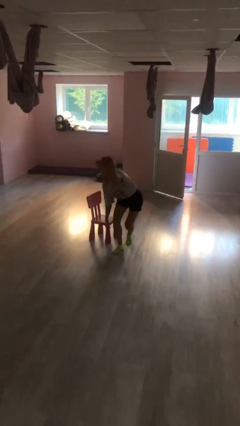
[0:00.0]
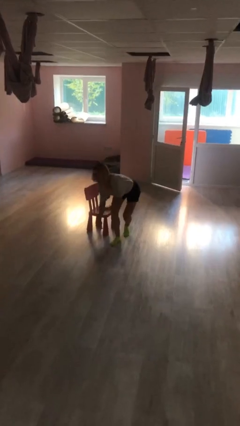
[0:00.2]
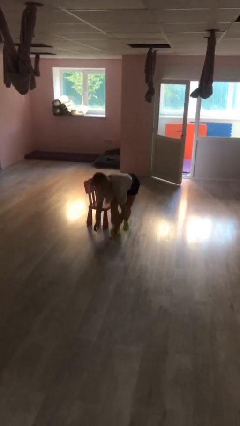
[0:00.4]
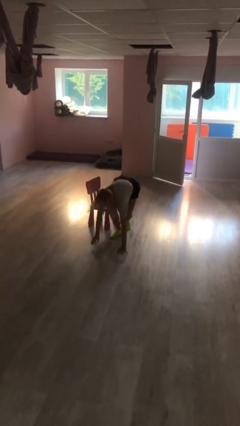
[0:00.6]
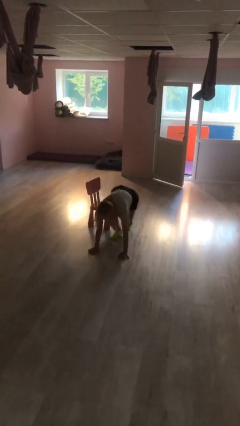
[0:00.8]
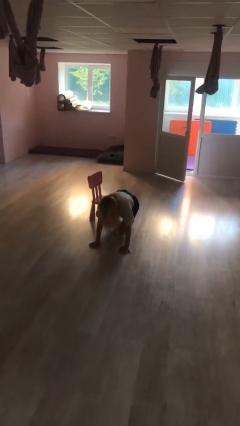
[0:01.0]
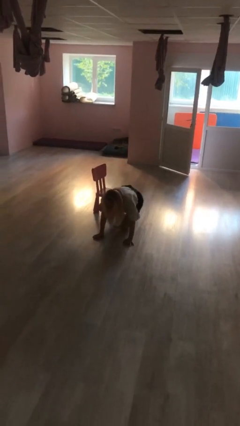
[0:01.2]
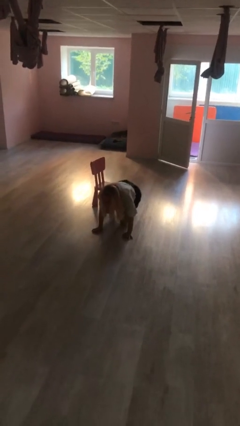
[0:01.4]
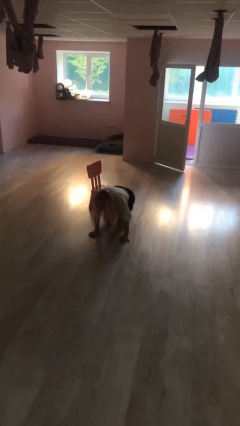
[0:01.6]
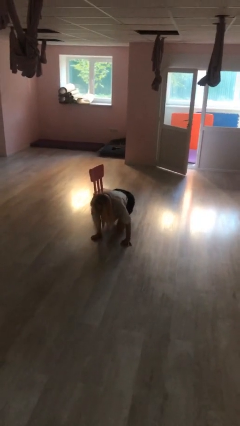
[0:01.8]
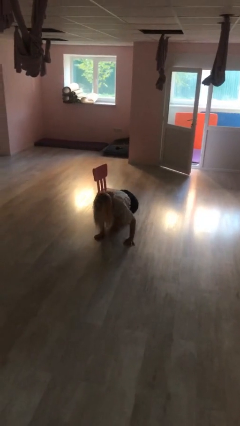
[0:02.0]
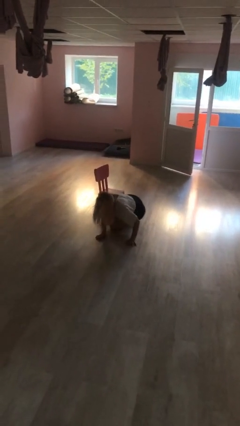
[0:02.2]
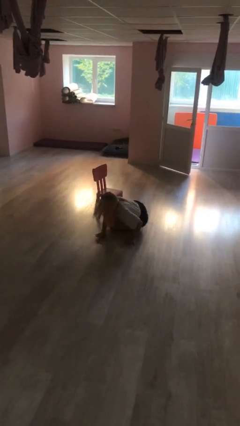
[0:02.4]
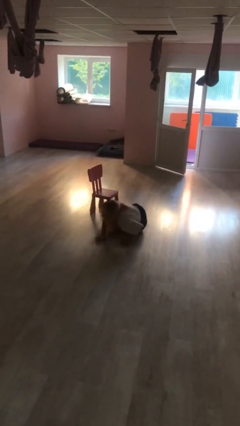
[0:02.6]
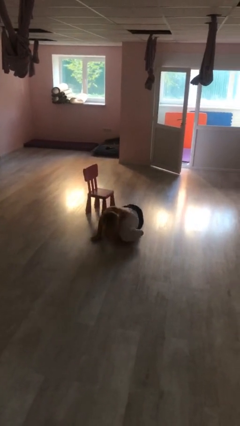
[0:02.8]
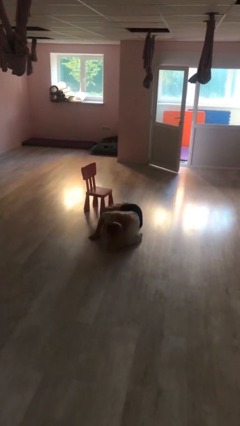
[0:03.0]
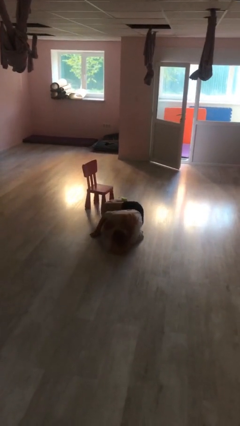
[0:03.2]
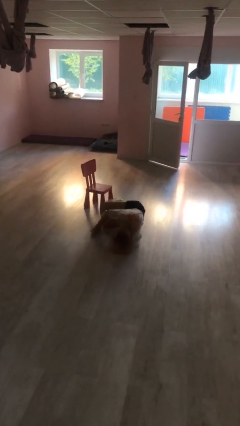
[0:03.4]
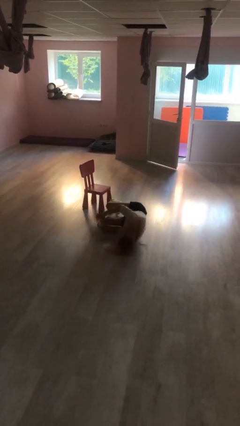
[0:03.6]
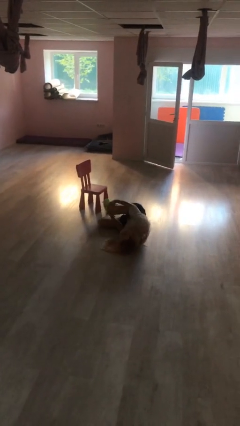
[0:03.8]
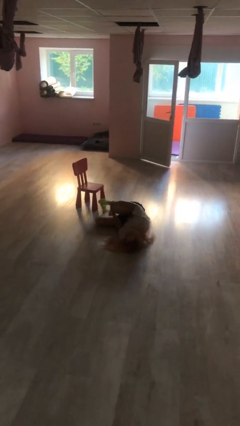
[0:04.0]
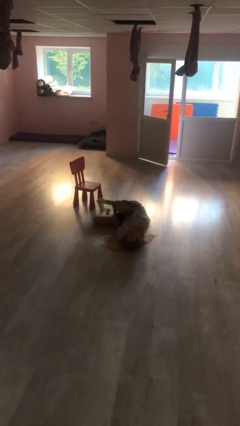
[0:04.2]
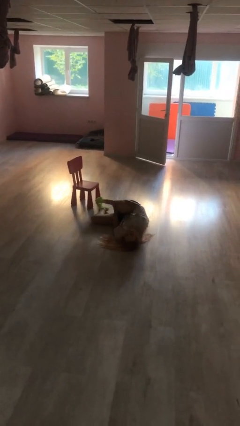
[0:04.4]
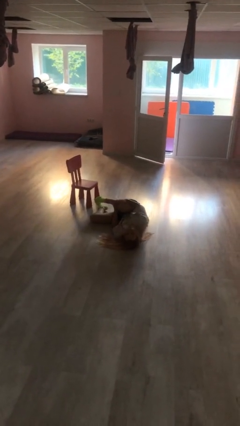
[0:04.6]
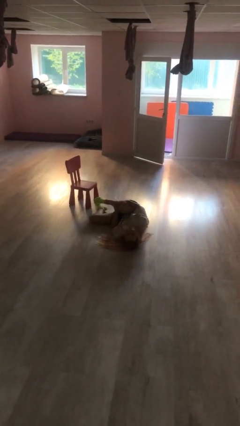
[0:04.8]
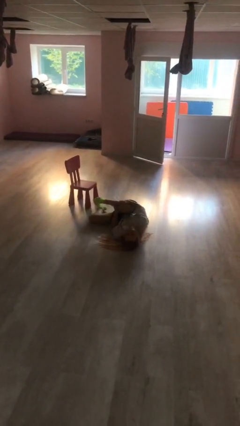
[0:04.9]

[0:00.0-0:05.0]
person lies down on floor

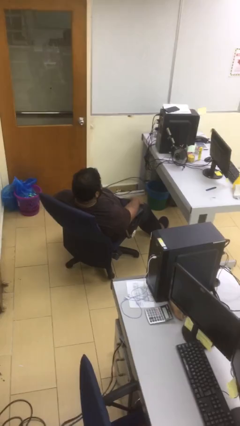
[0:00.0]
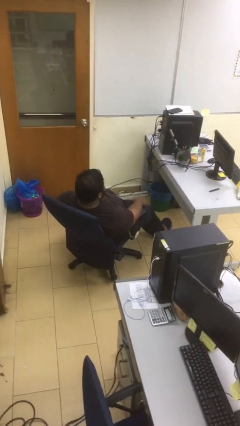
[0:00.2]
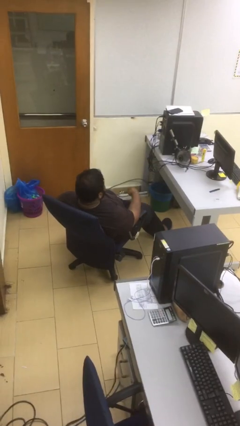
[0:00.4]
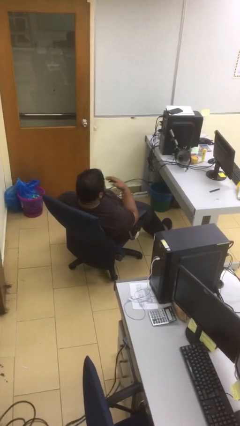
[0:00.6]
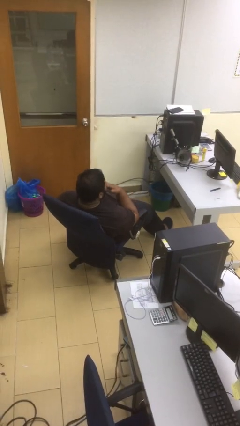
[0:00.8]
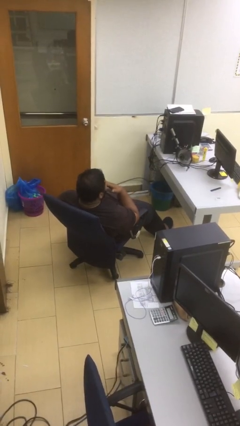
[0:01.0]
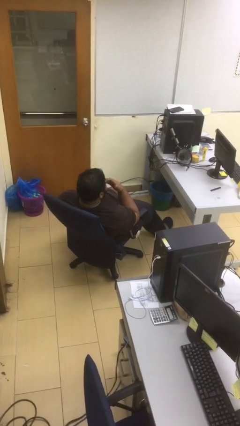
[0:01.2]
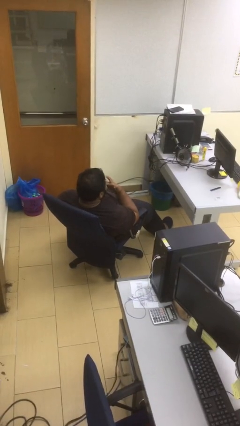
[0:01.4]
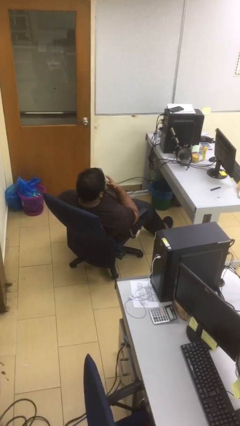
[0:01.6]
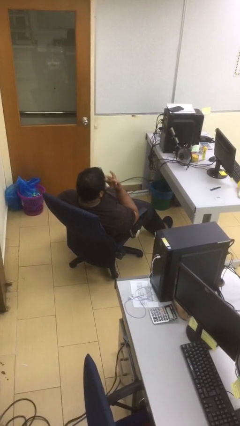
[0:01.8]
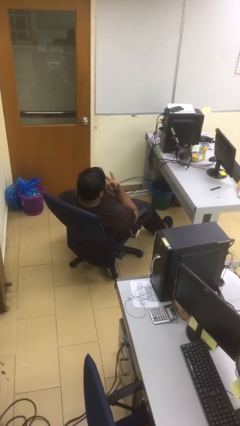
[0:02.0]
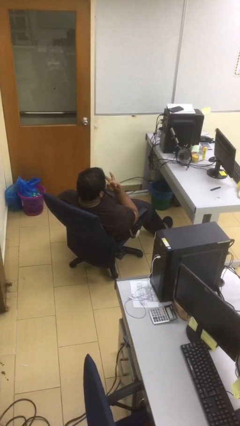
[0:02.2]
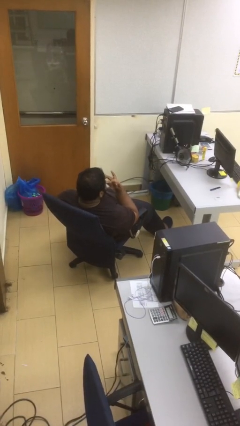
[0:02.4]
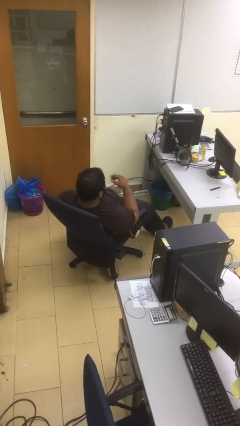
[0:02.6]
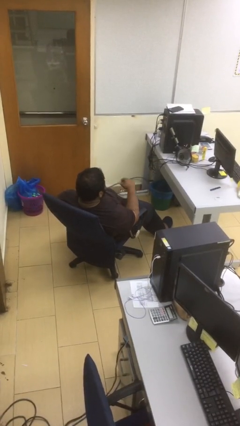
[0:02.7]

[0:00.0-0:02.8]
person licks fingers

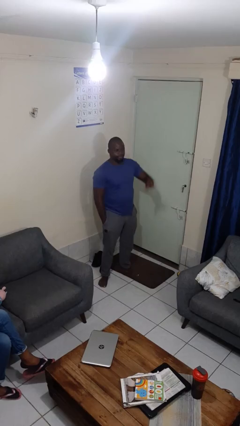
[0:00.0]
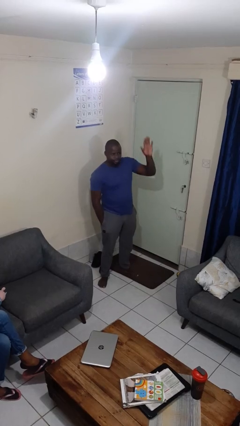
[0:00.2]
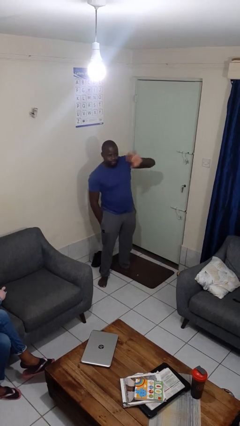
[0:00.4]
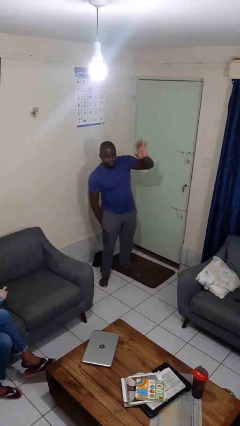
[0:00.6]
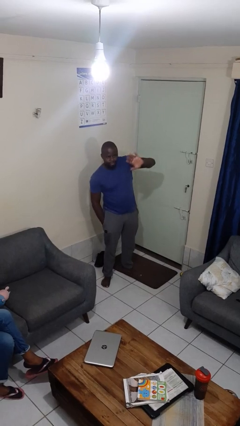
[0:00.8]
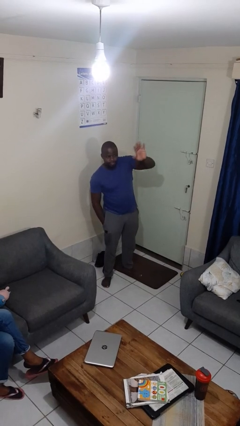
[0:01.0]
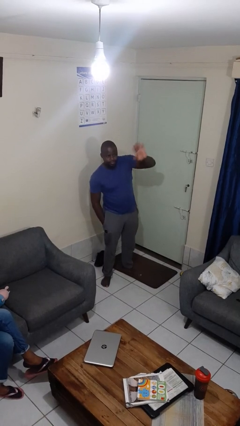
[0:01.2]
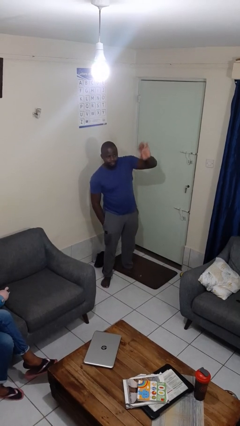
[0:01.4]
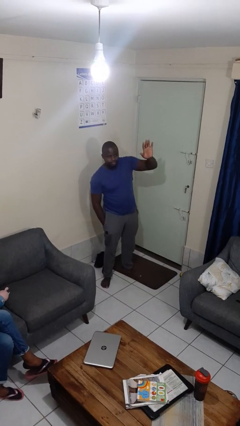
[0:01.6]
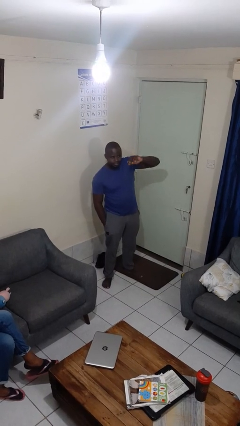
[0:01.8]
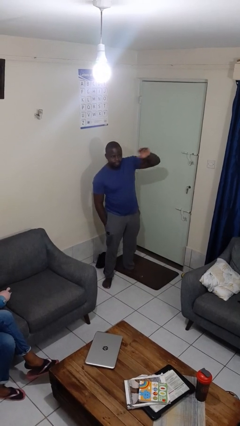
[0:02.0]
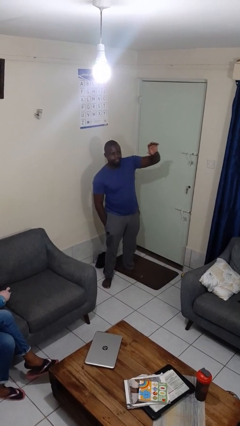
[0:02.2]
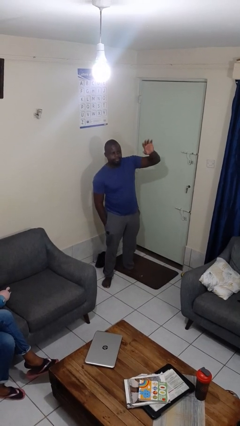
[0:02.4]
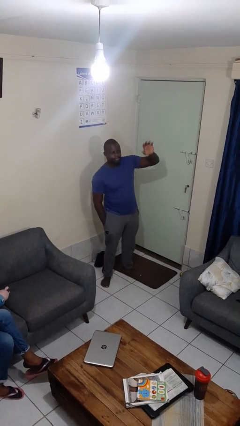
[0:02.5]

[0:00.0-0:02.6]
person waves at person

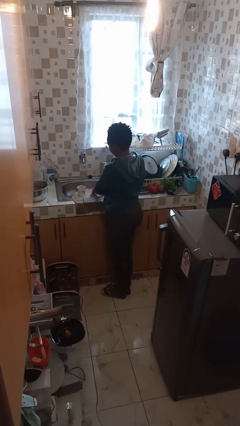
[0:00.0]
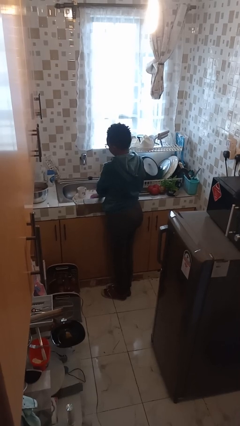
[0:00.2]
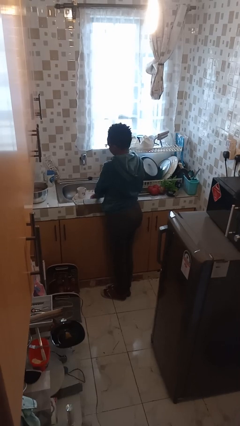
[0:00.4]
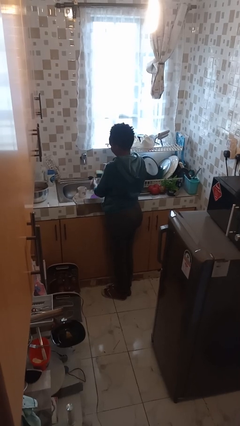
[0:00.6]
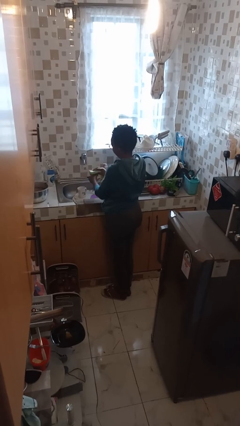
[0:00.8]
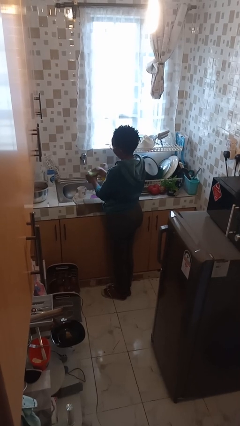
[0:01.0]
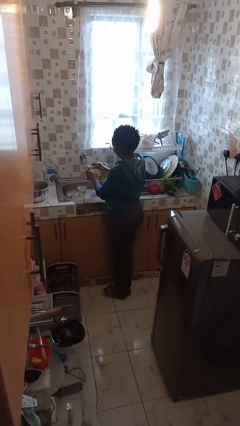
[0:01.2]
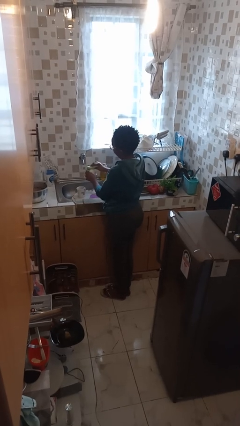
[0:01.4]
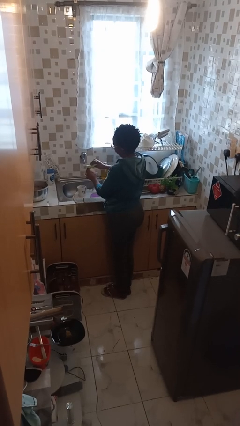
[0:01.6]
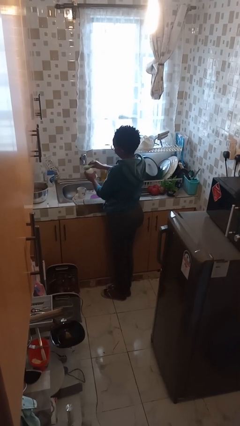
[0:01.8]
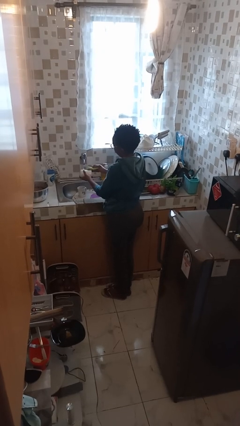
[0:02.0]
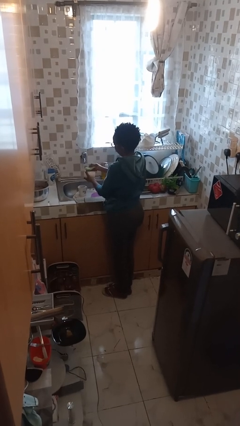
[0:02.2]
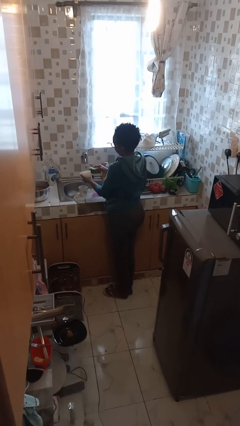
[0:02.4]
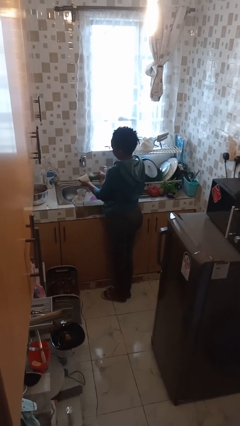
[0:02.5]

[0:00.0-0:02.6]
person washes dish

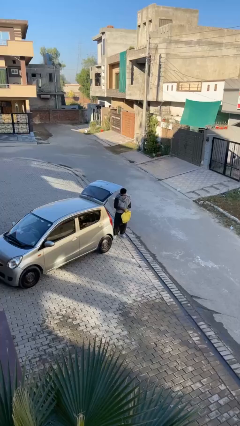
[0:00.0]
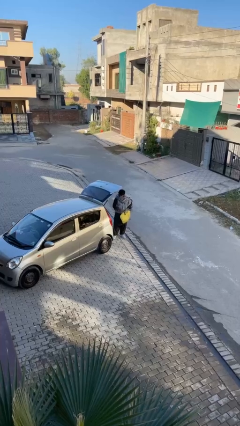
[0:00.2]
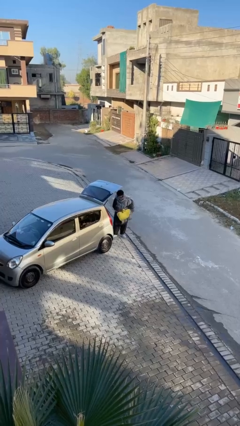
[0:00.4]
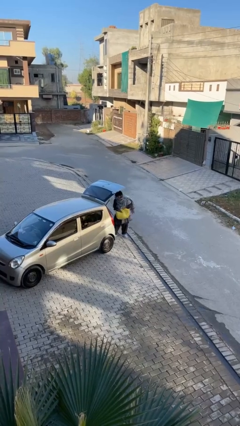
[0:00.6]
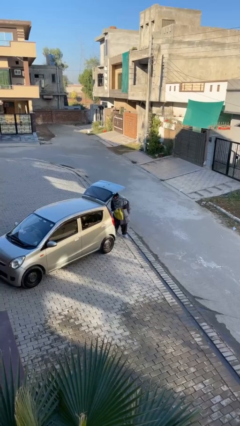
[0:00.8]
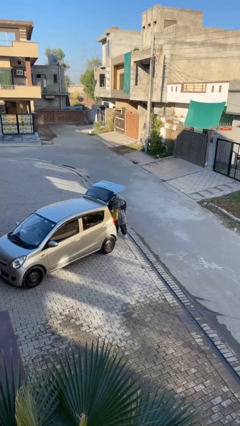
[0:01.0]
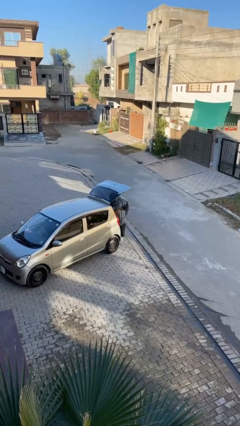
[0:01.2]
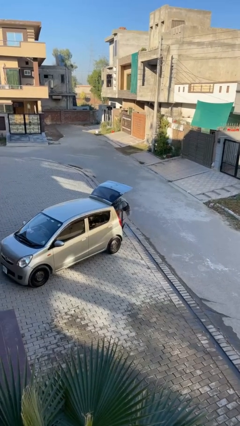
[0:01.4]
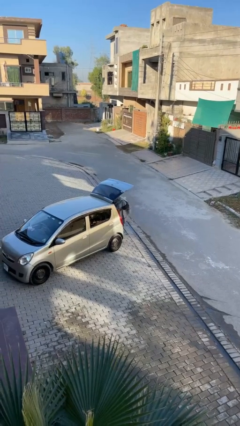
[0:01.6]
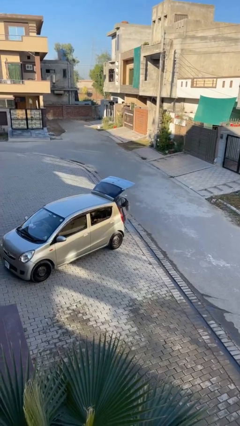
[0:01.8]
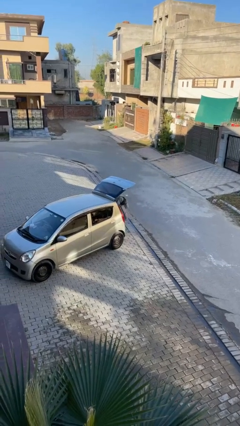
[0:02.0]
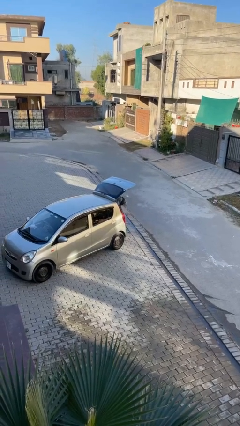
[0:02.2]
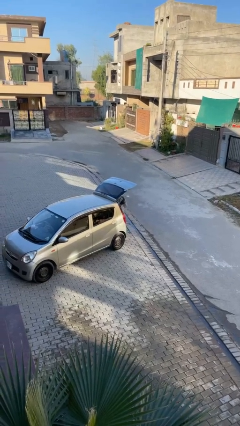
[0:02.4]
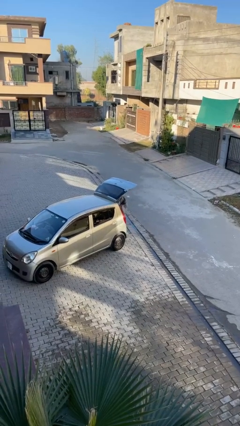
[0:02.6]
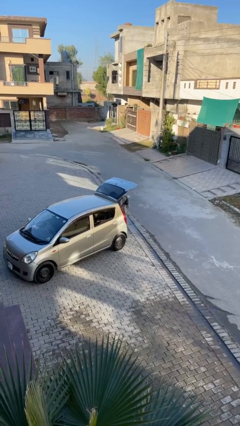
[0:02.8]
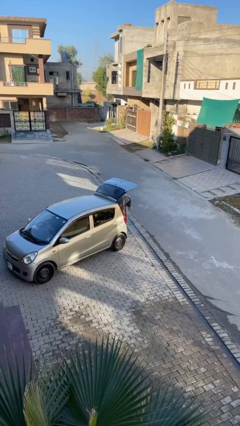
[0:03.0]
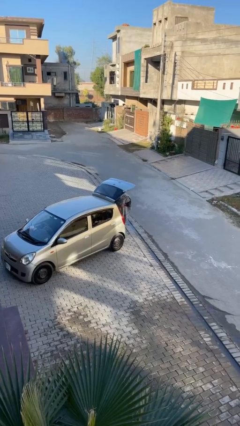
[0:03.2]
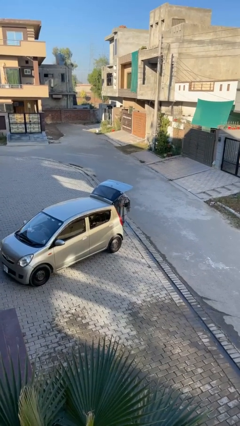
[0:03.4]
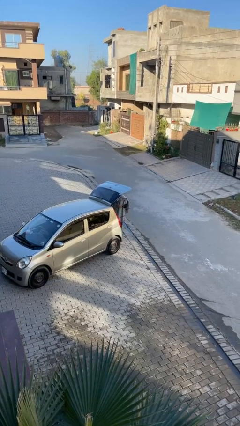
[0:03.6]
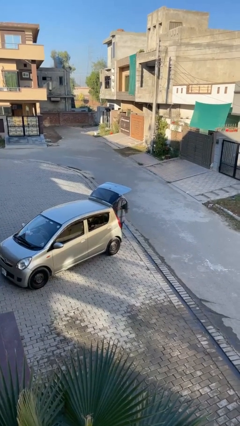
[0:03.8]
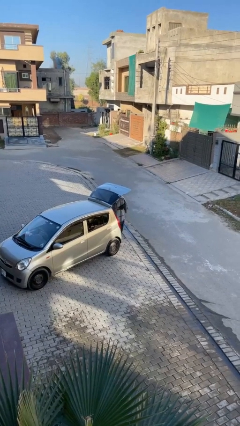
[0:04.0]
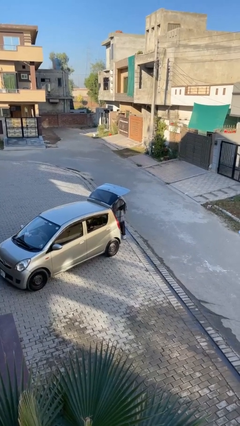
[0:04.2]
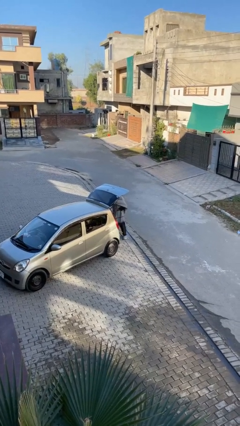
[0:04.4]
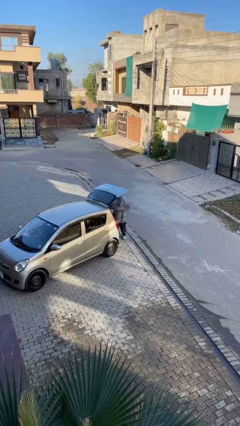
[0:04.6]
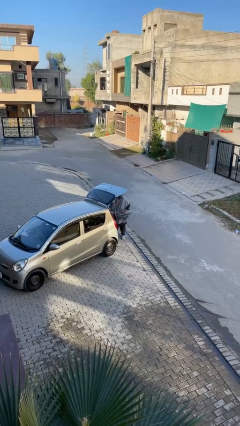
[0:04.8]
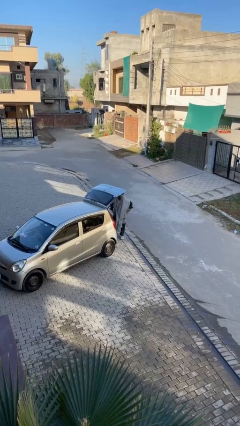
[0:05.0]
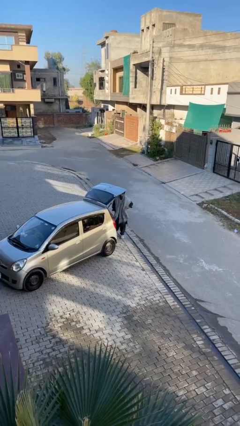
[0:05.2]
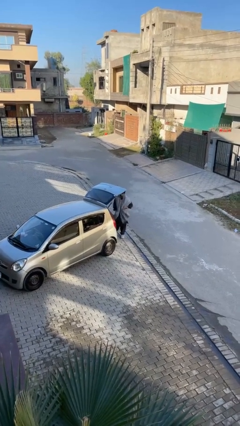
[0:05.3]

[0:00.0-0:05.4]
person loads car
